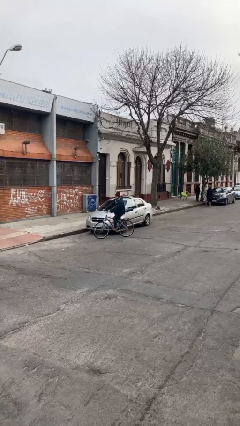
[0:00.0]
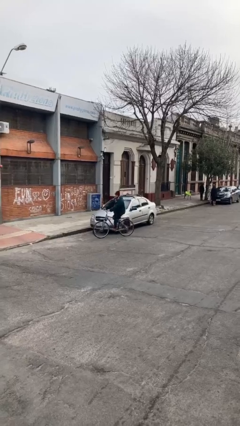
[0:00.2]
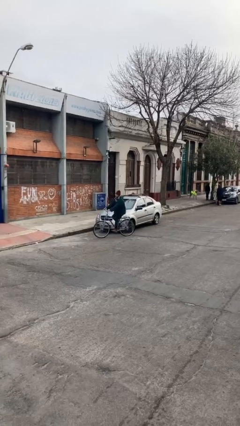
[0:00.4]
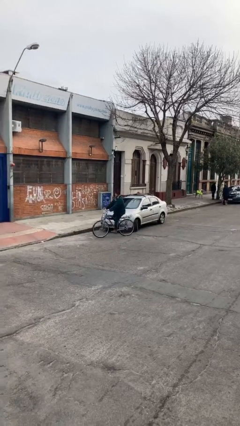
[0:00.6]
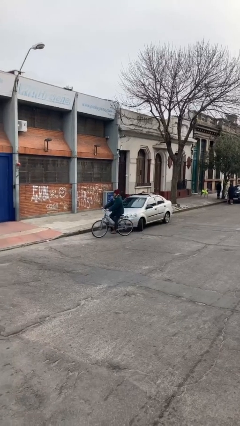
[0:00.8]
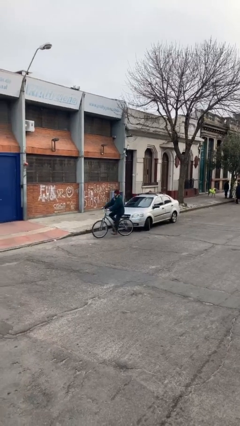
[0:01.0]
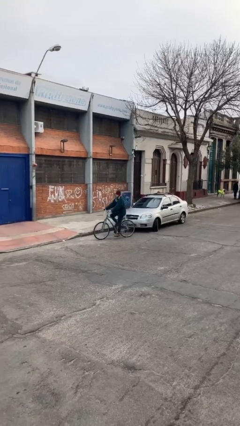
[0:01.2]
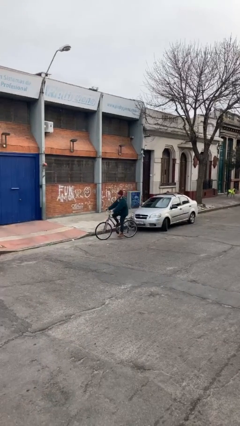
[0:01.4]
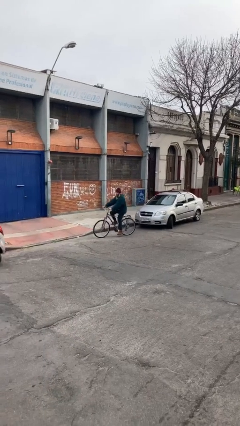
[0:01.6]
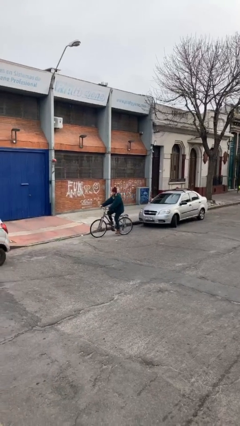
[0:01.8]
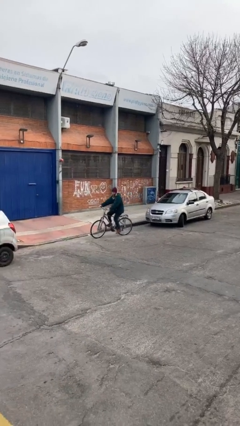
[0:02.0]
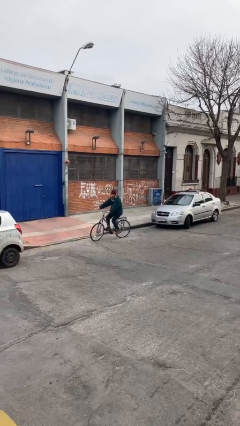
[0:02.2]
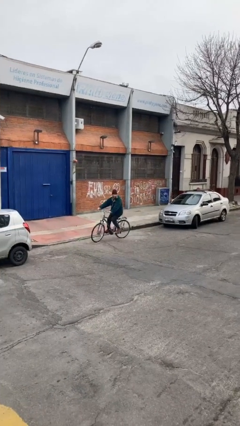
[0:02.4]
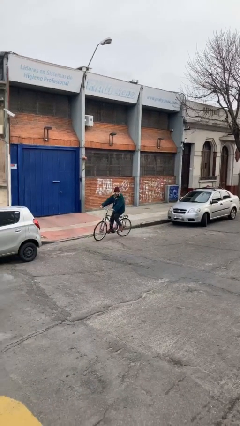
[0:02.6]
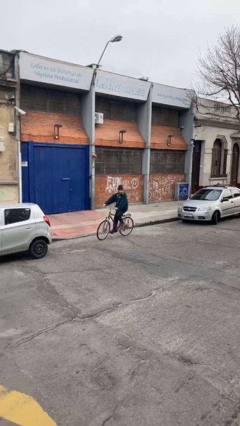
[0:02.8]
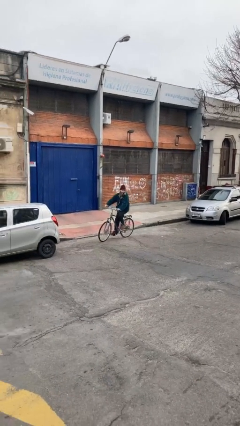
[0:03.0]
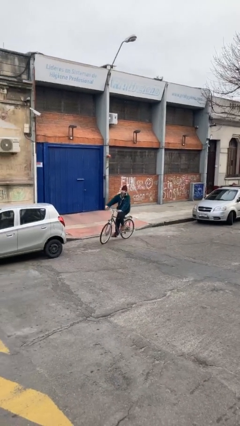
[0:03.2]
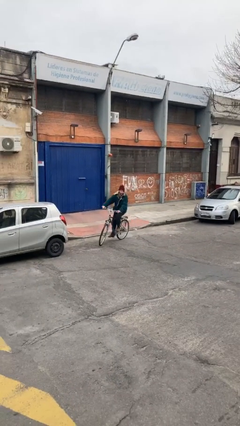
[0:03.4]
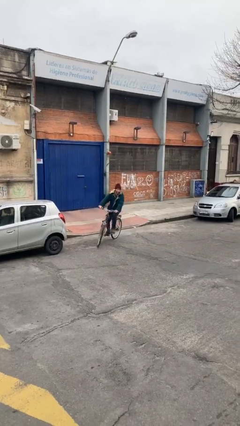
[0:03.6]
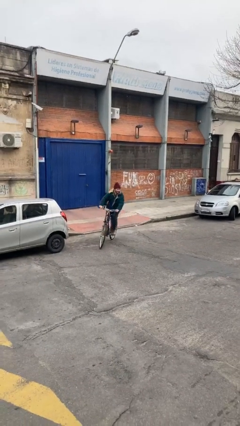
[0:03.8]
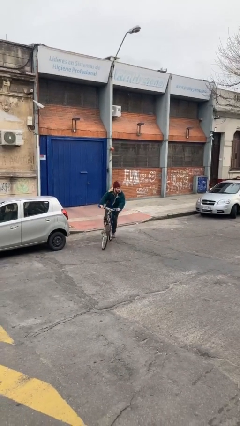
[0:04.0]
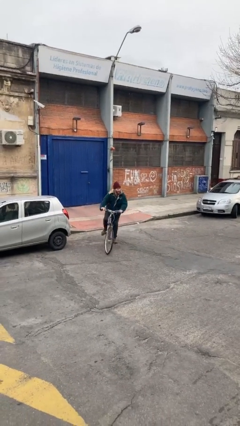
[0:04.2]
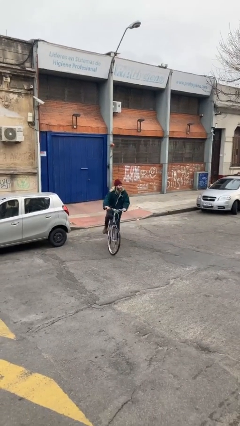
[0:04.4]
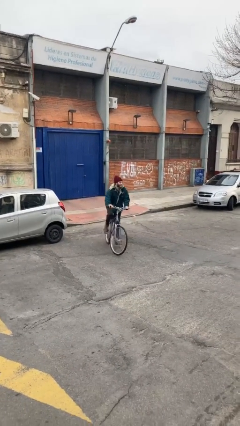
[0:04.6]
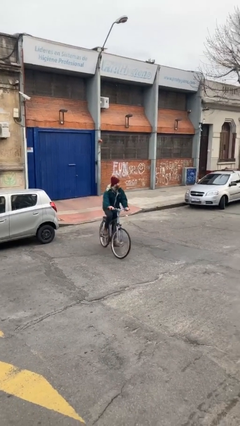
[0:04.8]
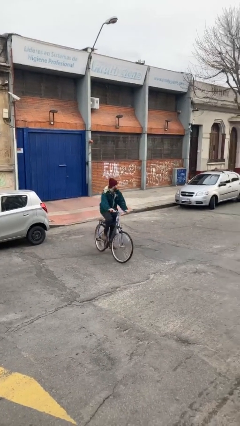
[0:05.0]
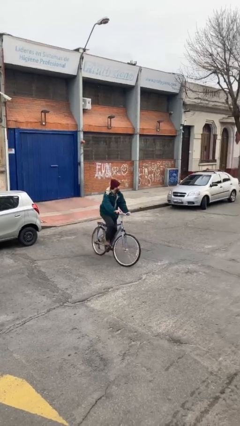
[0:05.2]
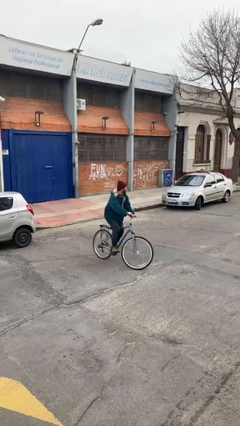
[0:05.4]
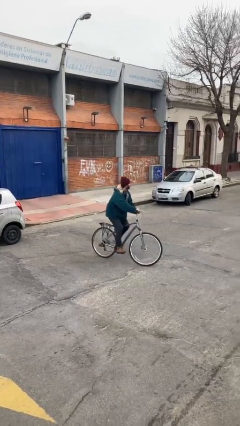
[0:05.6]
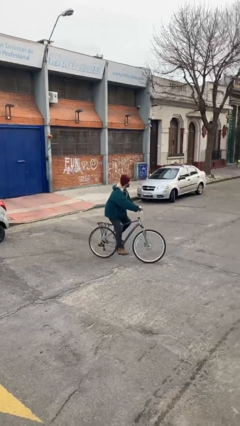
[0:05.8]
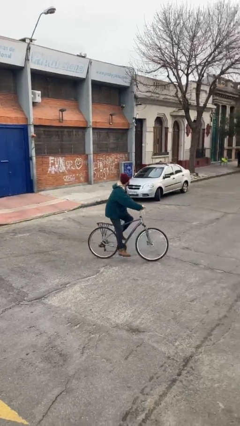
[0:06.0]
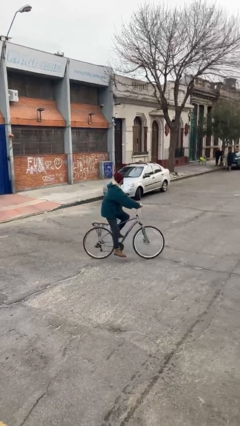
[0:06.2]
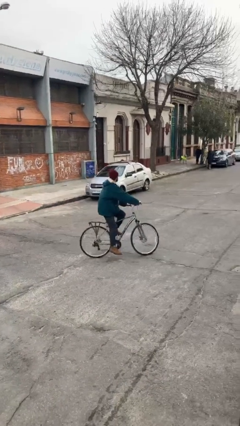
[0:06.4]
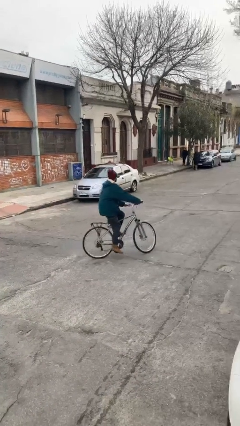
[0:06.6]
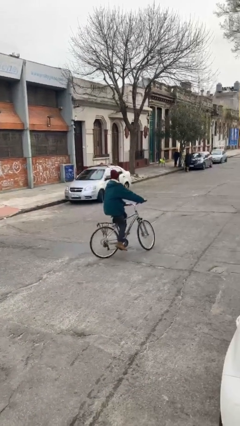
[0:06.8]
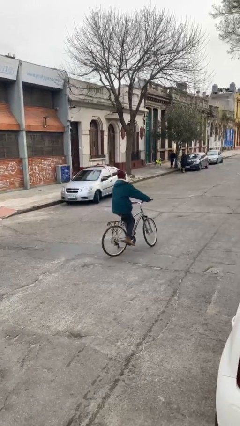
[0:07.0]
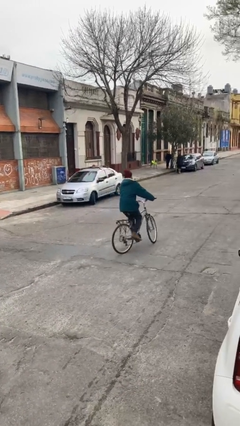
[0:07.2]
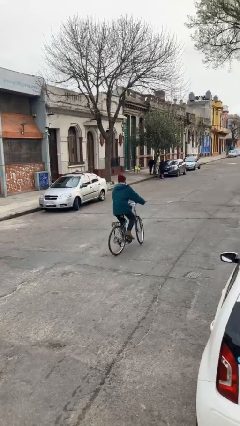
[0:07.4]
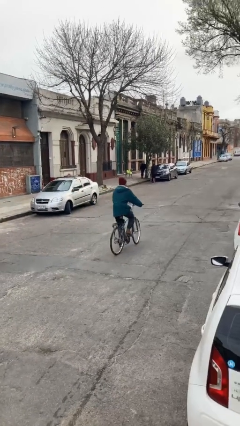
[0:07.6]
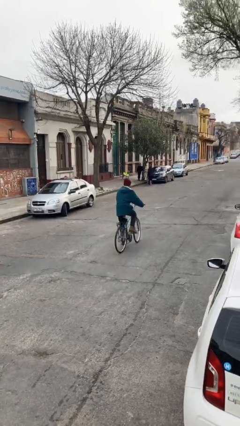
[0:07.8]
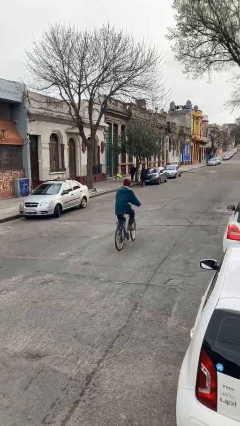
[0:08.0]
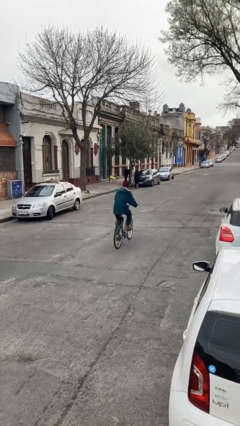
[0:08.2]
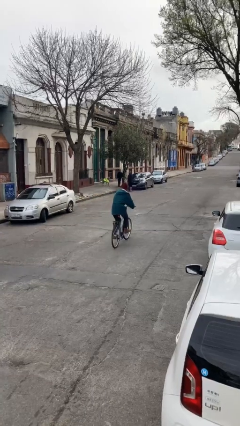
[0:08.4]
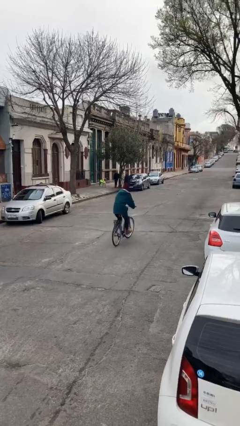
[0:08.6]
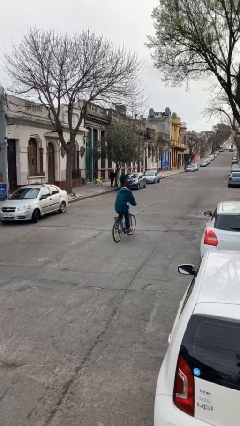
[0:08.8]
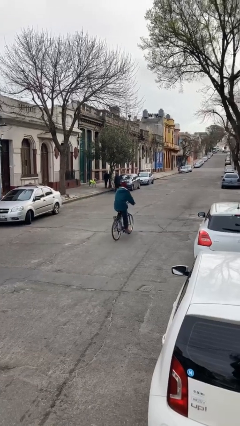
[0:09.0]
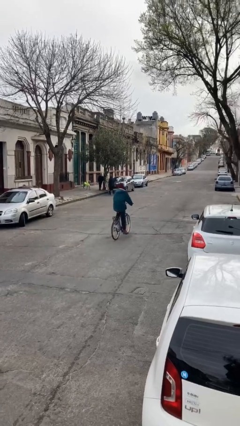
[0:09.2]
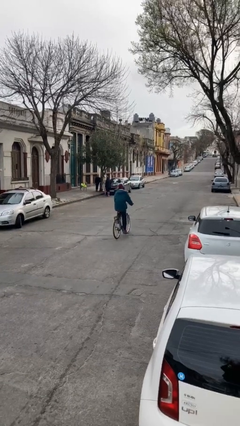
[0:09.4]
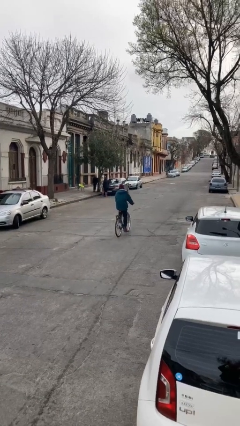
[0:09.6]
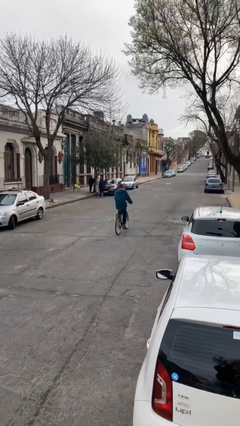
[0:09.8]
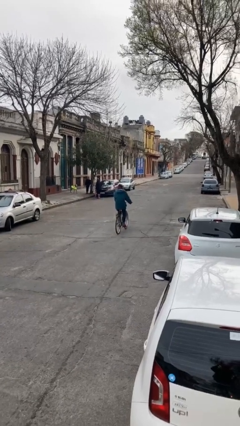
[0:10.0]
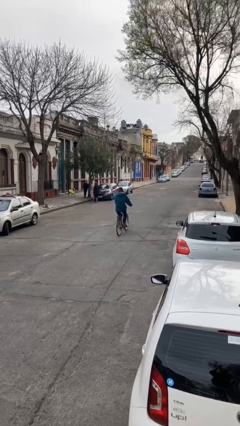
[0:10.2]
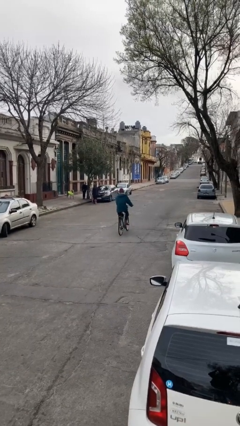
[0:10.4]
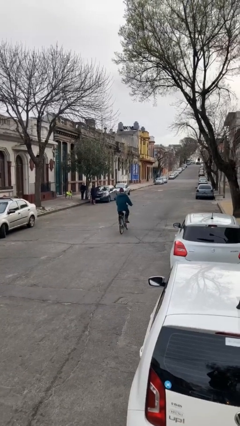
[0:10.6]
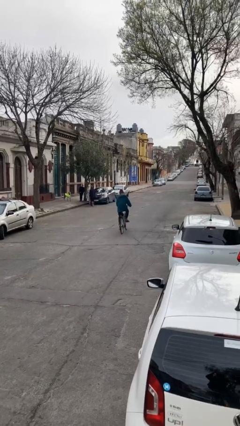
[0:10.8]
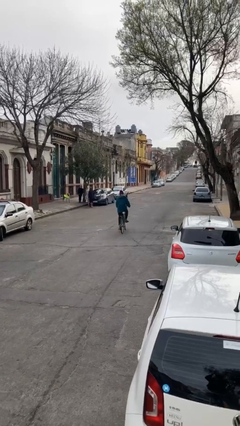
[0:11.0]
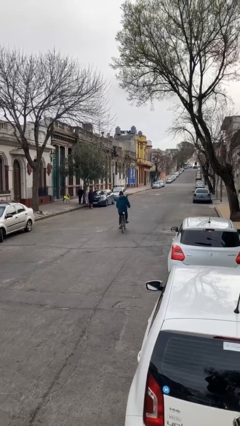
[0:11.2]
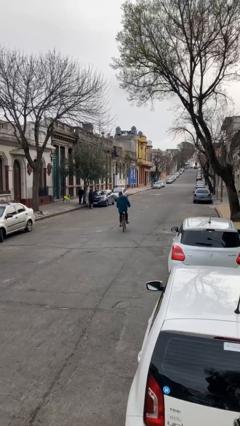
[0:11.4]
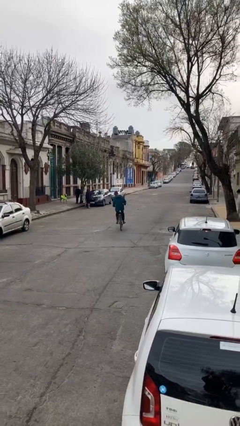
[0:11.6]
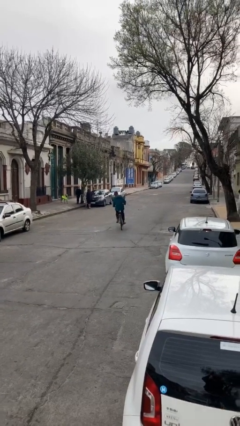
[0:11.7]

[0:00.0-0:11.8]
person rides bicycle

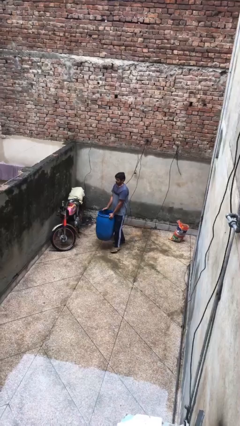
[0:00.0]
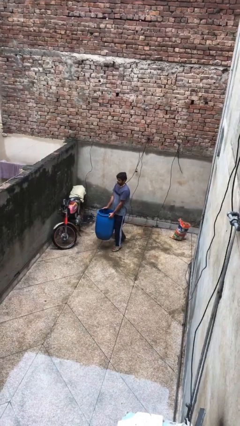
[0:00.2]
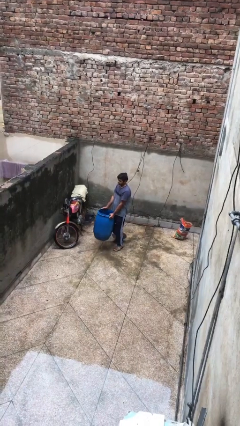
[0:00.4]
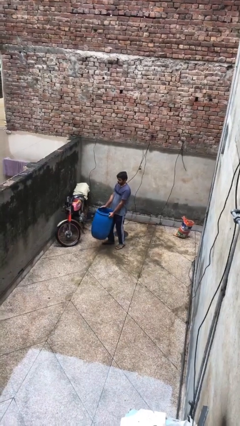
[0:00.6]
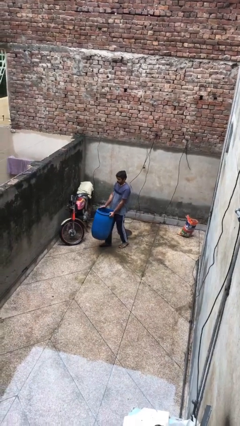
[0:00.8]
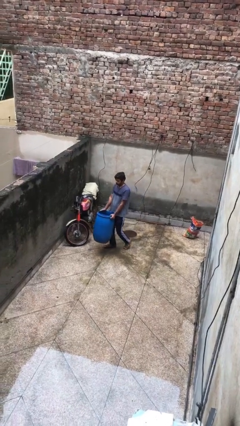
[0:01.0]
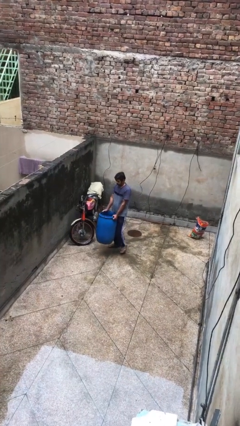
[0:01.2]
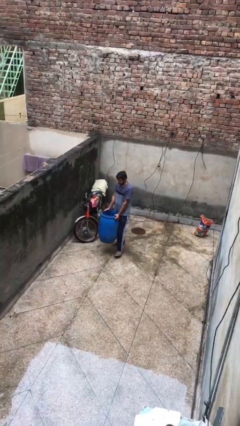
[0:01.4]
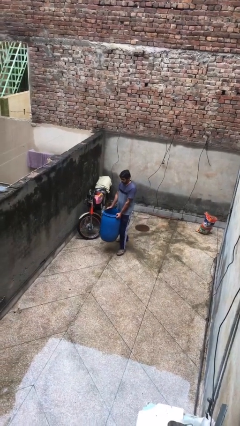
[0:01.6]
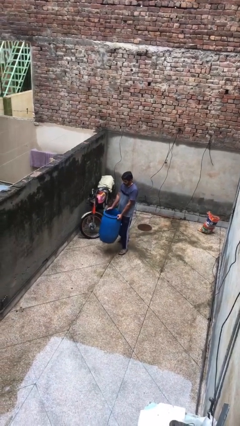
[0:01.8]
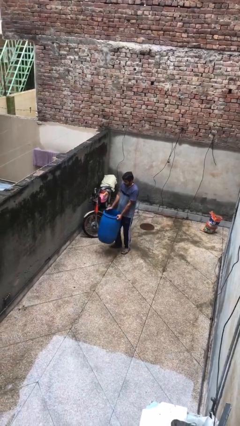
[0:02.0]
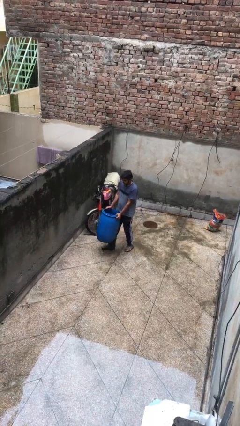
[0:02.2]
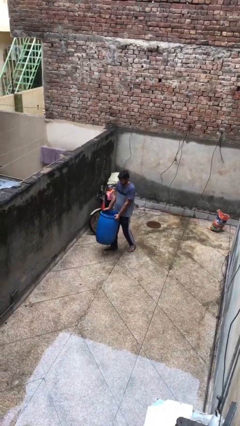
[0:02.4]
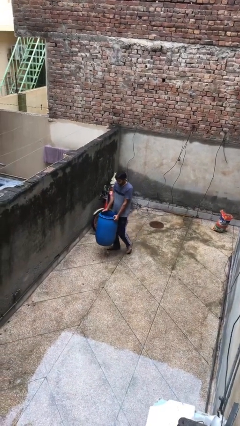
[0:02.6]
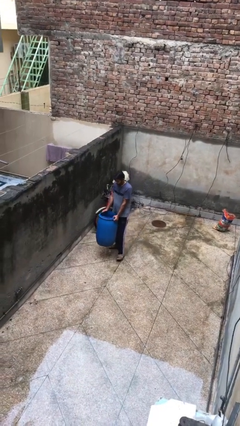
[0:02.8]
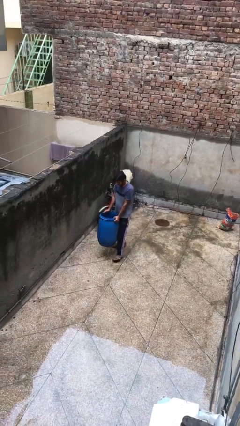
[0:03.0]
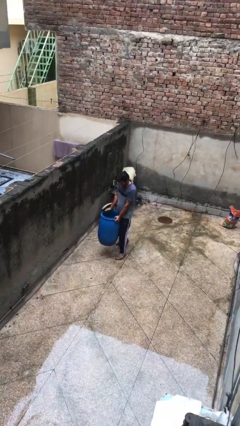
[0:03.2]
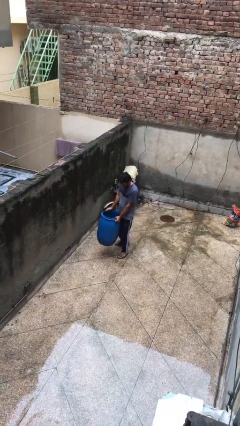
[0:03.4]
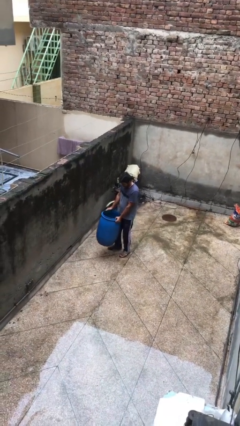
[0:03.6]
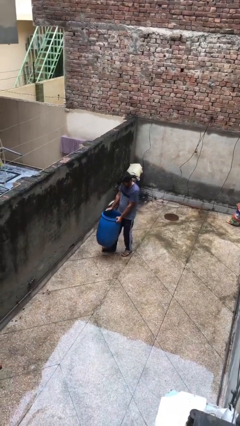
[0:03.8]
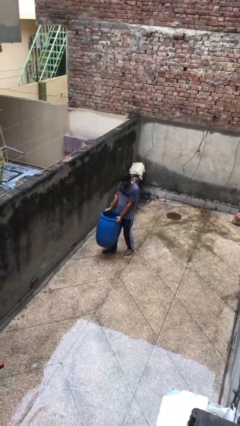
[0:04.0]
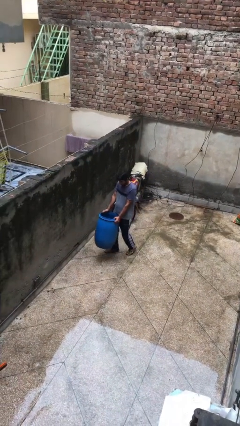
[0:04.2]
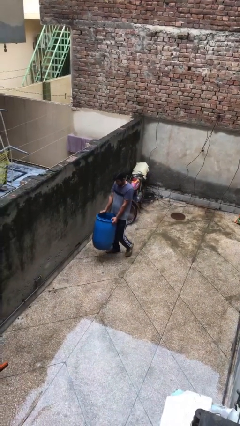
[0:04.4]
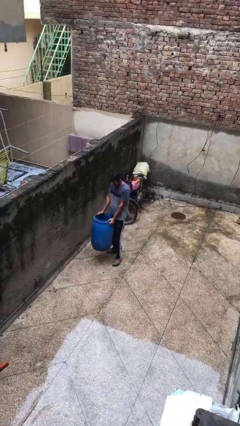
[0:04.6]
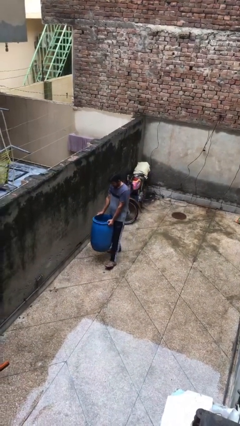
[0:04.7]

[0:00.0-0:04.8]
person carries heavy object

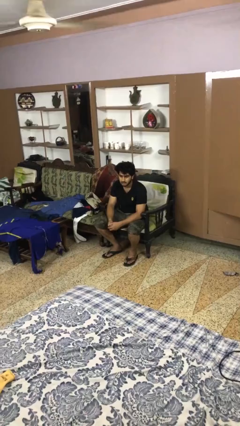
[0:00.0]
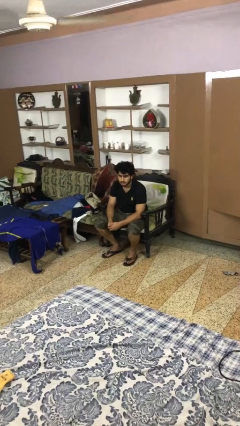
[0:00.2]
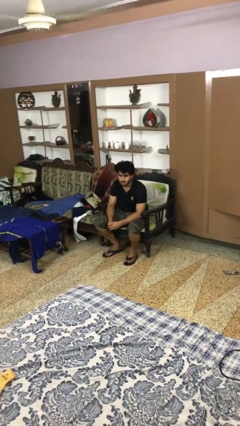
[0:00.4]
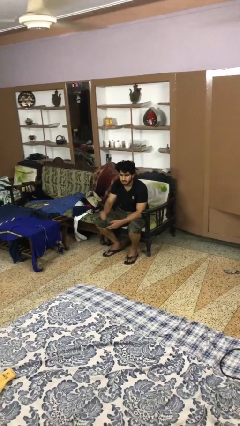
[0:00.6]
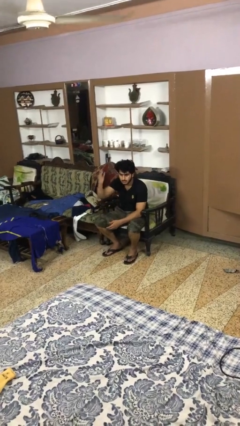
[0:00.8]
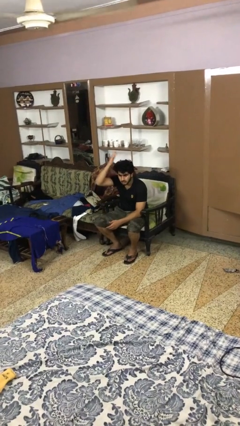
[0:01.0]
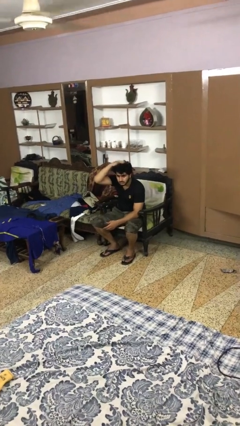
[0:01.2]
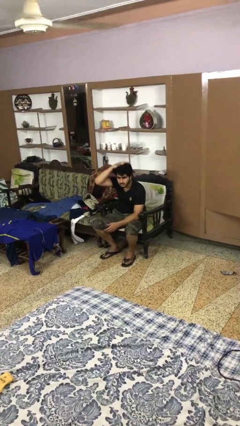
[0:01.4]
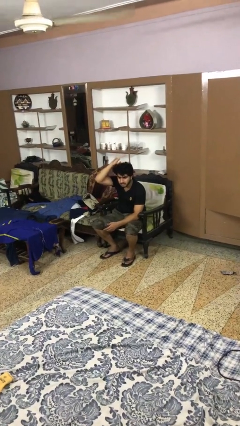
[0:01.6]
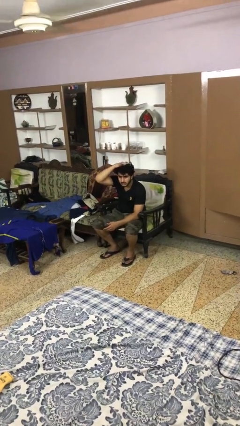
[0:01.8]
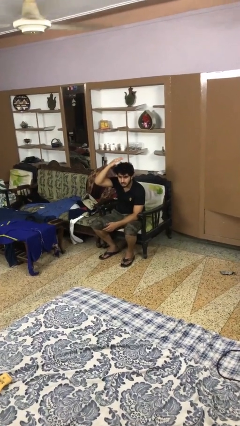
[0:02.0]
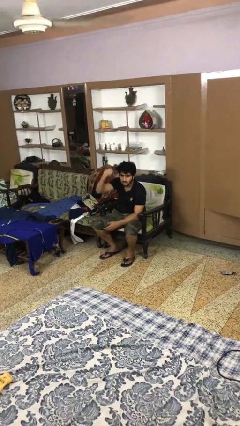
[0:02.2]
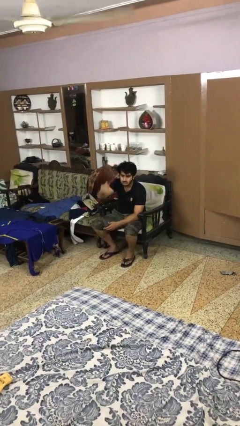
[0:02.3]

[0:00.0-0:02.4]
person pats head
